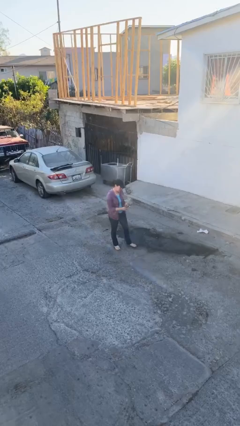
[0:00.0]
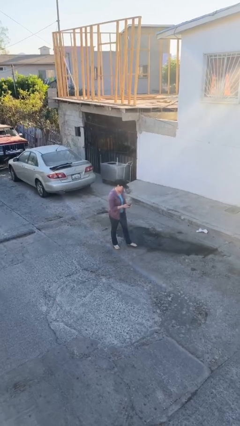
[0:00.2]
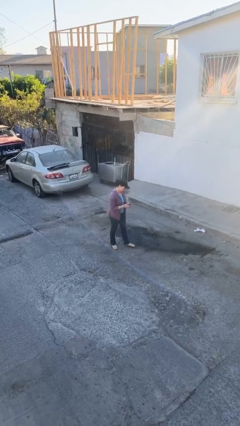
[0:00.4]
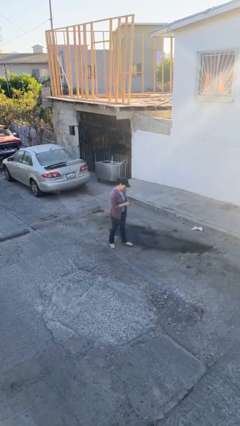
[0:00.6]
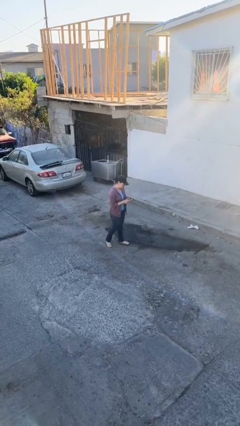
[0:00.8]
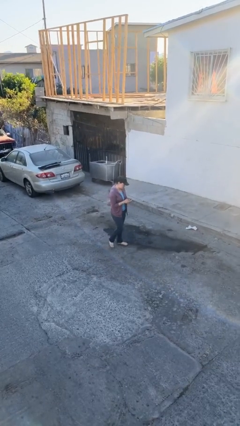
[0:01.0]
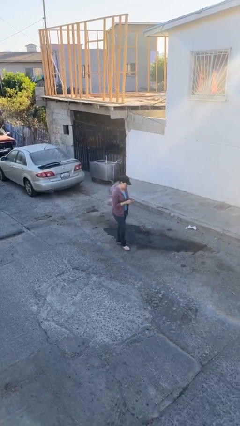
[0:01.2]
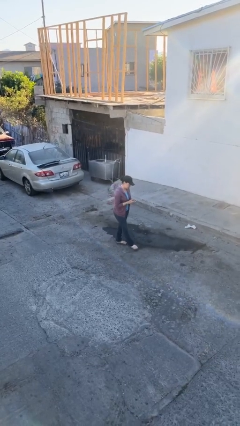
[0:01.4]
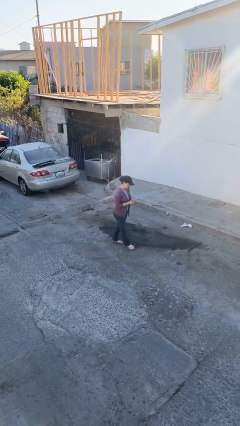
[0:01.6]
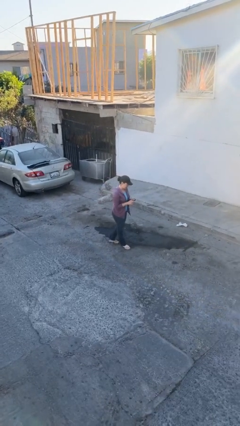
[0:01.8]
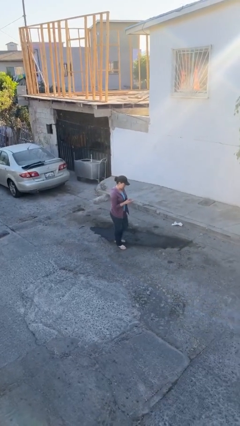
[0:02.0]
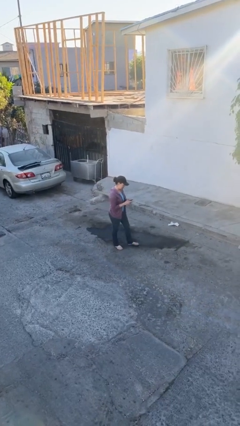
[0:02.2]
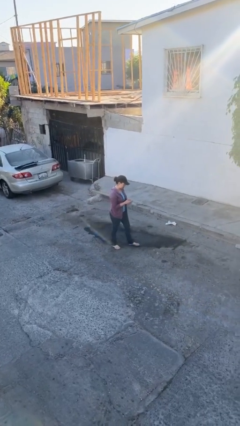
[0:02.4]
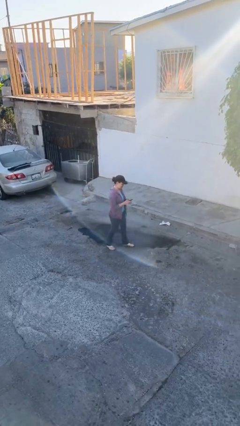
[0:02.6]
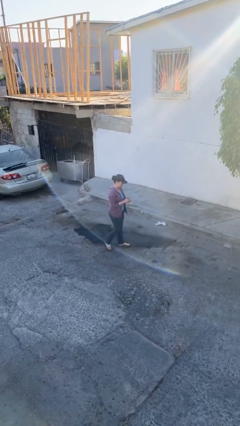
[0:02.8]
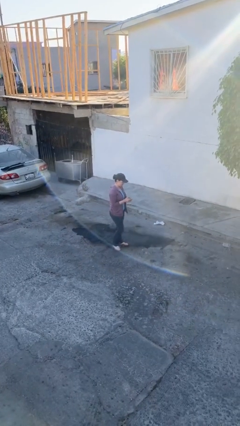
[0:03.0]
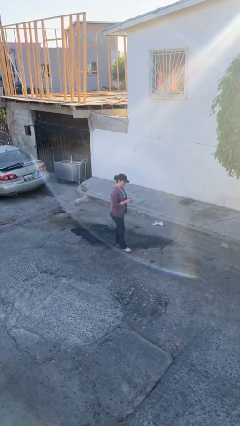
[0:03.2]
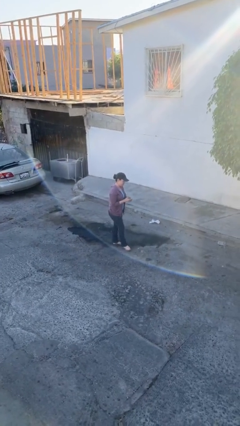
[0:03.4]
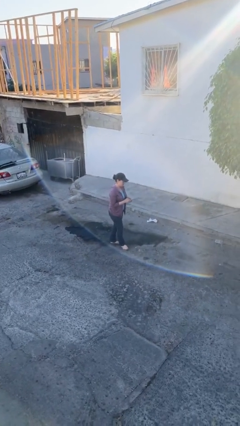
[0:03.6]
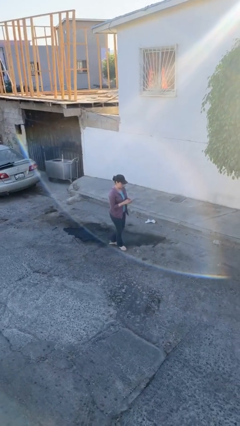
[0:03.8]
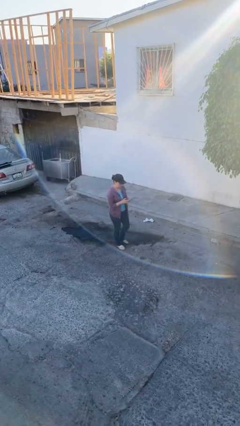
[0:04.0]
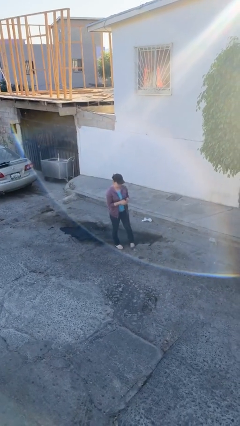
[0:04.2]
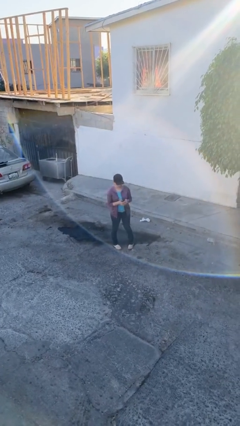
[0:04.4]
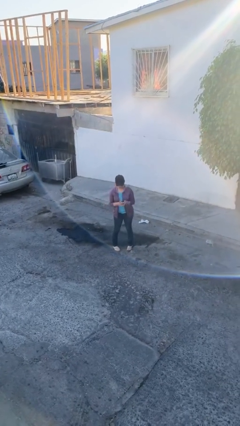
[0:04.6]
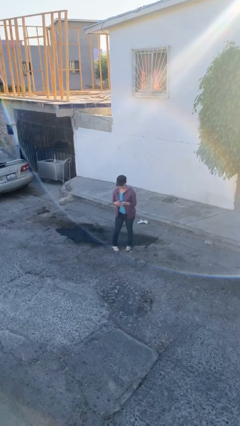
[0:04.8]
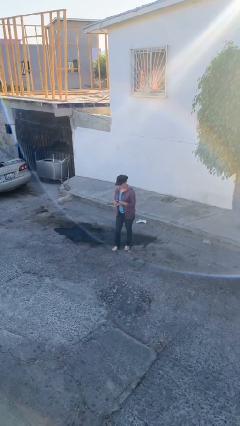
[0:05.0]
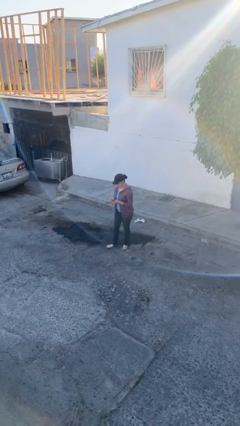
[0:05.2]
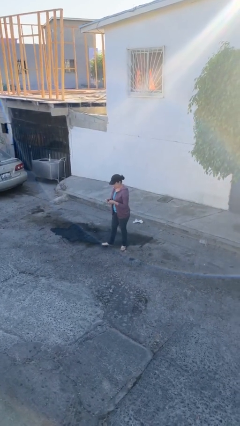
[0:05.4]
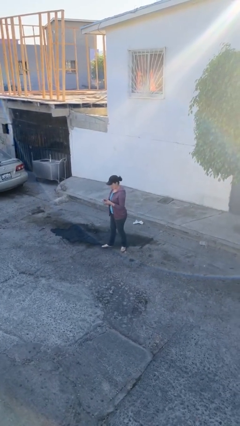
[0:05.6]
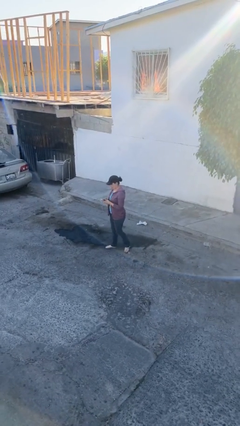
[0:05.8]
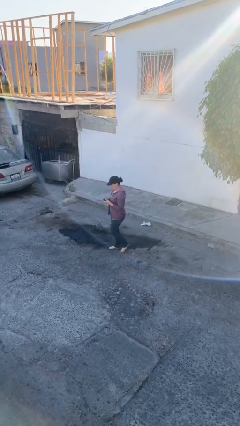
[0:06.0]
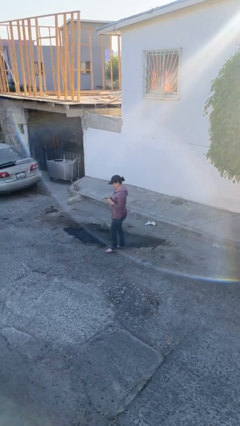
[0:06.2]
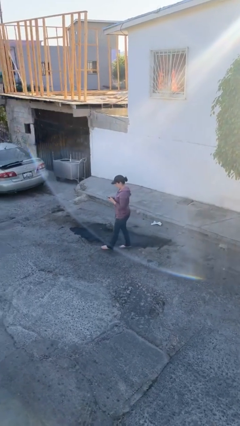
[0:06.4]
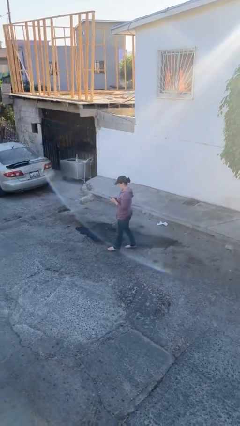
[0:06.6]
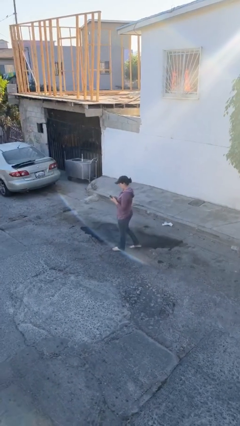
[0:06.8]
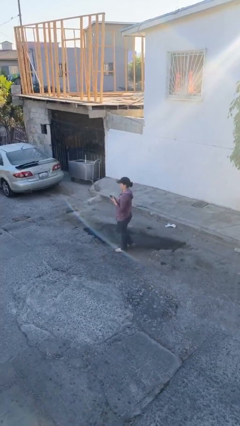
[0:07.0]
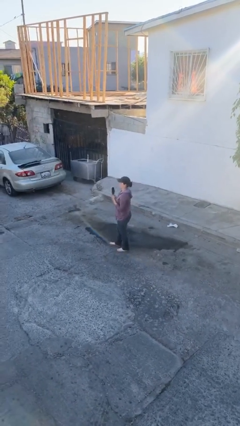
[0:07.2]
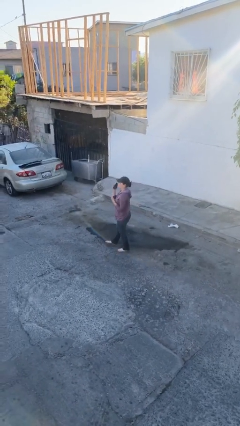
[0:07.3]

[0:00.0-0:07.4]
person texts on phone

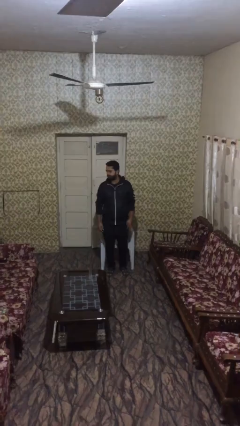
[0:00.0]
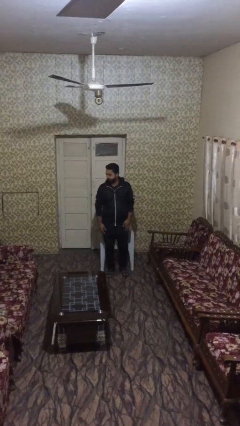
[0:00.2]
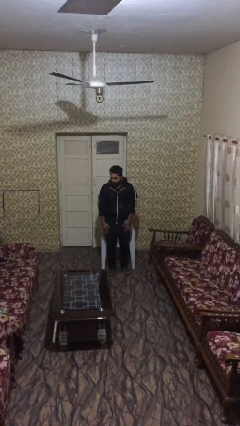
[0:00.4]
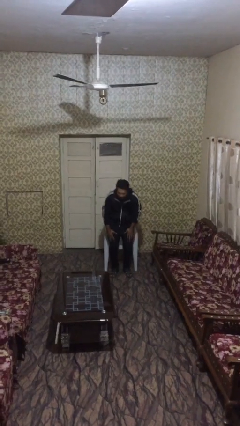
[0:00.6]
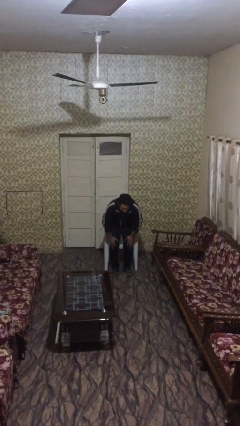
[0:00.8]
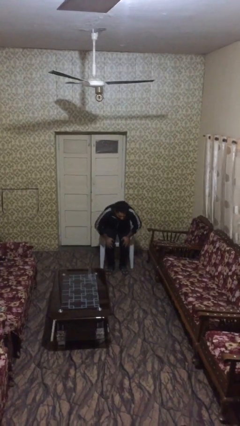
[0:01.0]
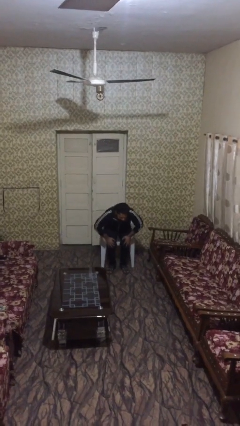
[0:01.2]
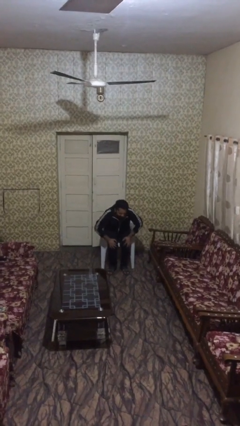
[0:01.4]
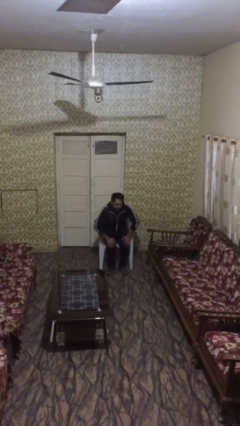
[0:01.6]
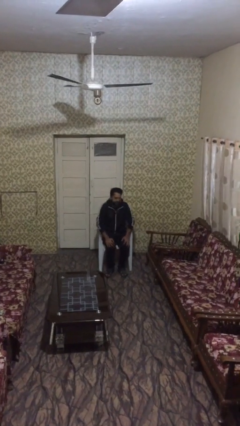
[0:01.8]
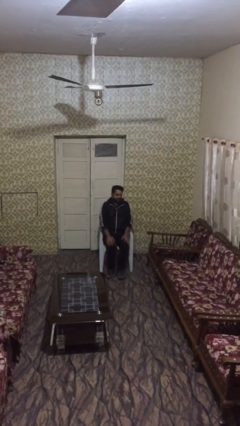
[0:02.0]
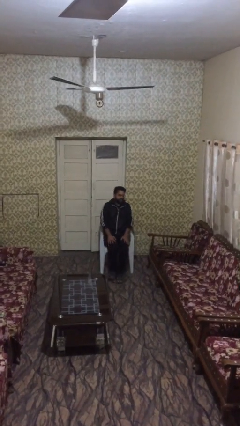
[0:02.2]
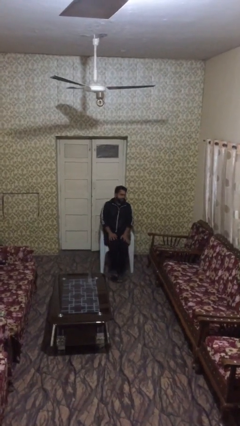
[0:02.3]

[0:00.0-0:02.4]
person sits down

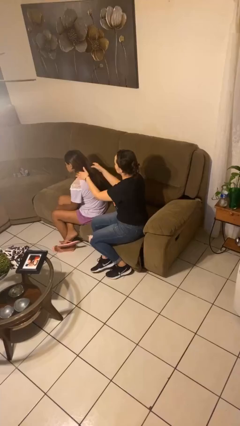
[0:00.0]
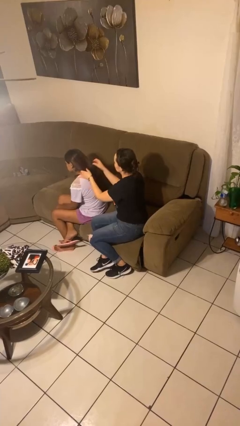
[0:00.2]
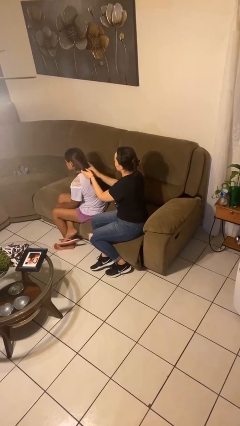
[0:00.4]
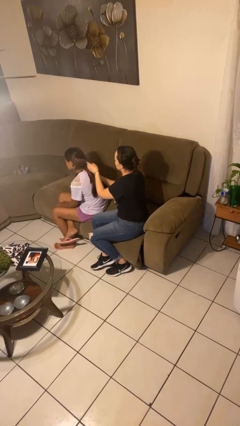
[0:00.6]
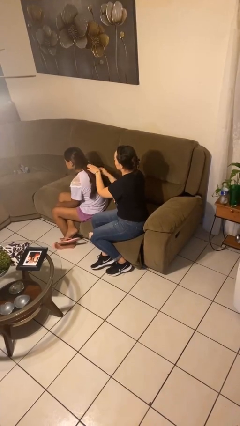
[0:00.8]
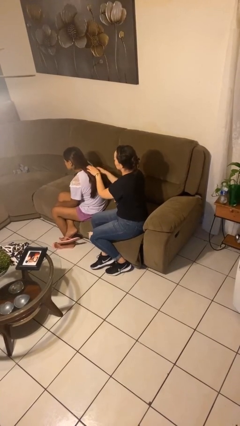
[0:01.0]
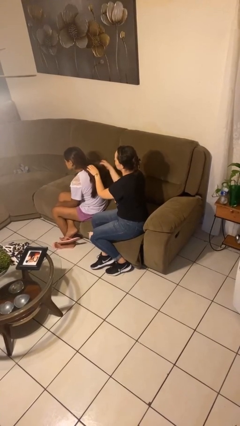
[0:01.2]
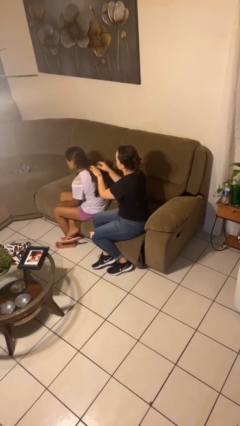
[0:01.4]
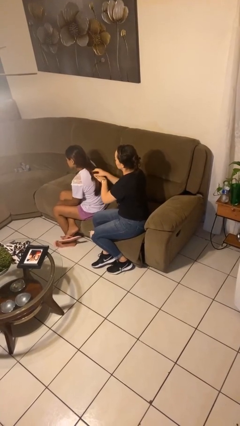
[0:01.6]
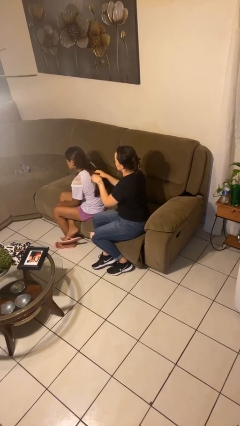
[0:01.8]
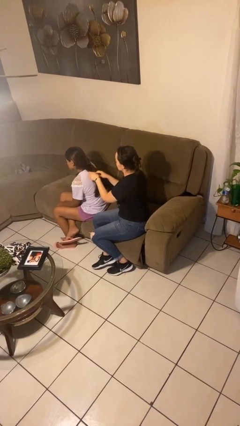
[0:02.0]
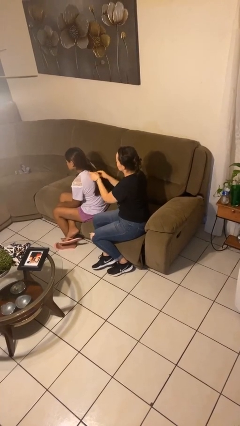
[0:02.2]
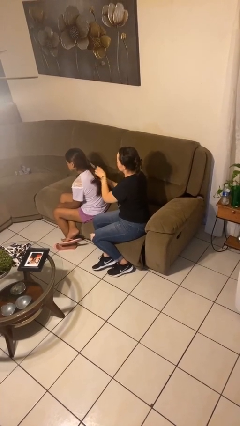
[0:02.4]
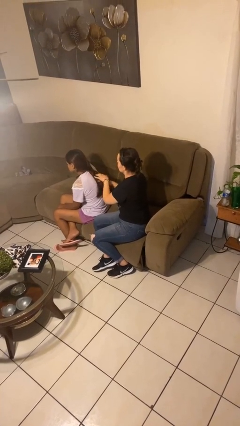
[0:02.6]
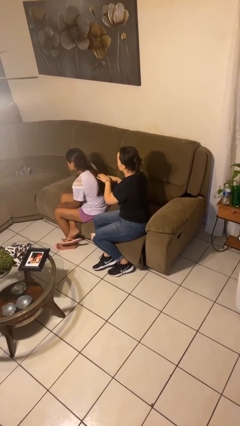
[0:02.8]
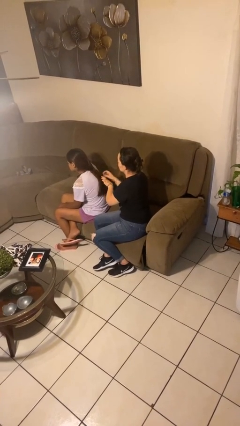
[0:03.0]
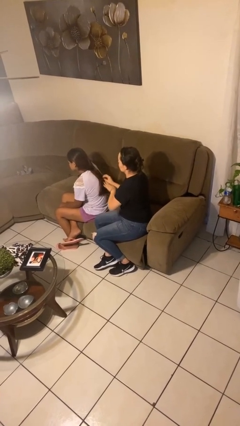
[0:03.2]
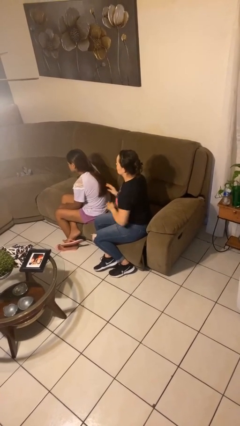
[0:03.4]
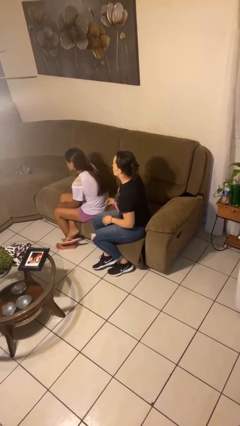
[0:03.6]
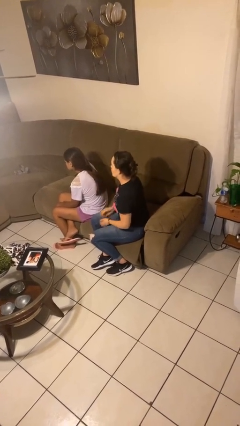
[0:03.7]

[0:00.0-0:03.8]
person braids hair of person

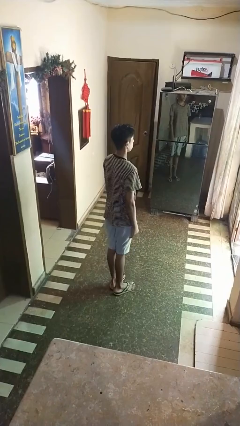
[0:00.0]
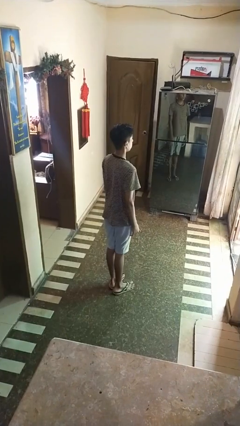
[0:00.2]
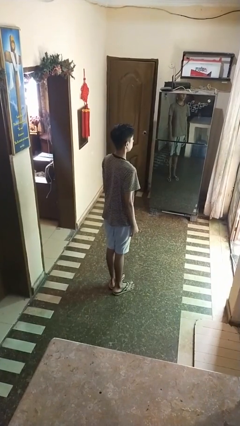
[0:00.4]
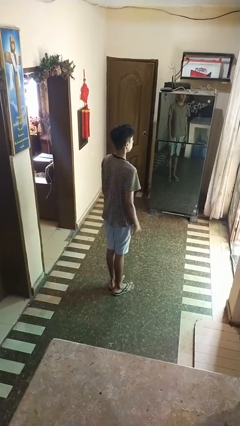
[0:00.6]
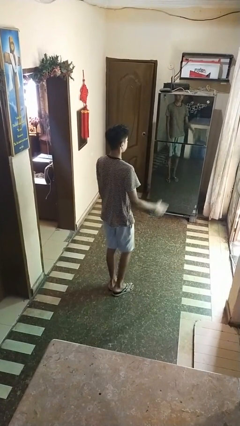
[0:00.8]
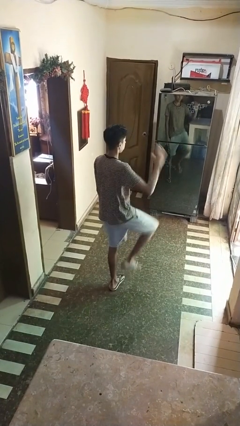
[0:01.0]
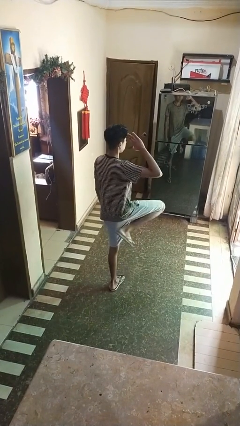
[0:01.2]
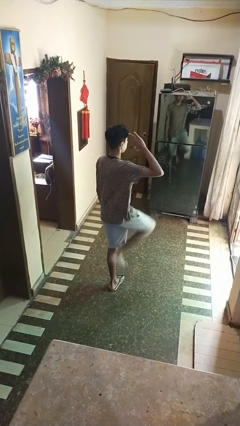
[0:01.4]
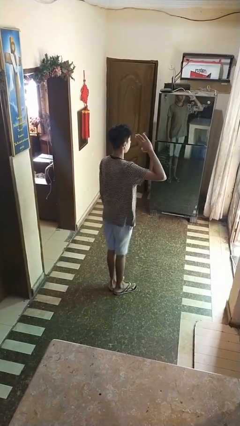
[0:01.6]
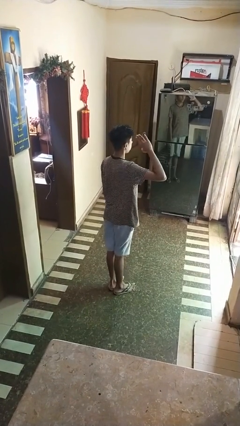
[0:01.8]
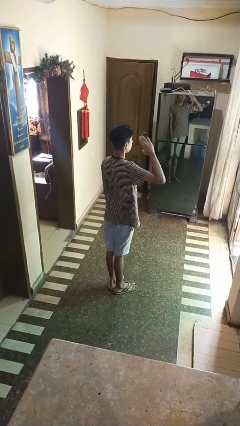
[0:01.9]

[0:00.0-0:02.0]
person salutes

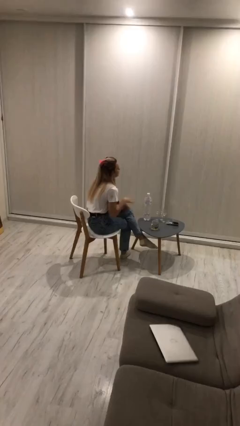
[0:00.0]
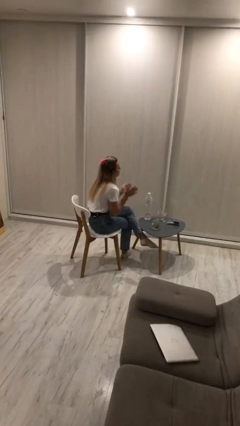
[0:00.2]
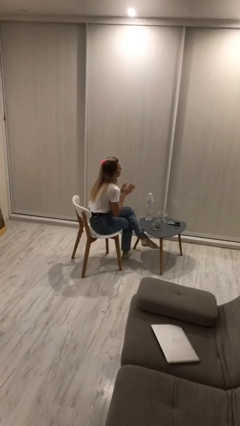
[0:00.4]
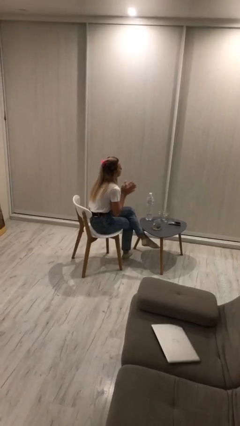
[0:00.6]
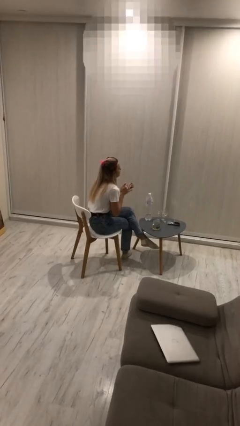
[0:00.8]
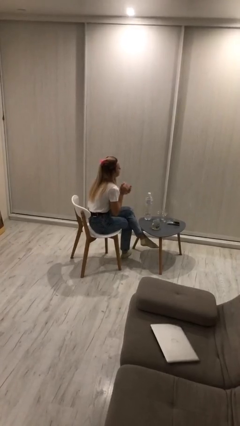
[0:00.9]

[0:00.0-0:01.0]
person claps hands

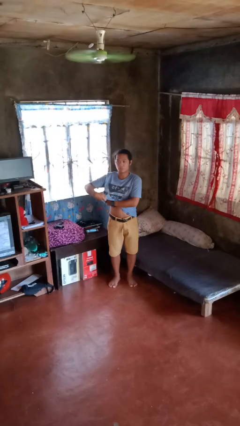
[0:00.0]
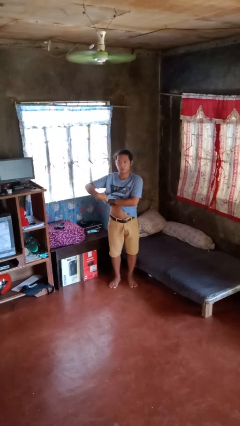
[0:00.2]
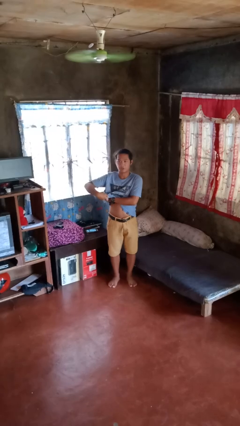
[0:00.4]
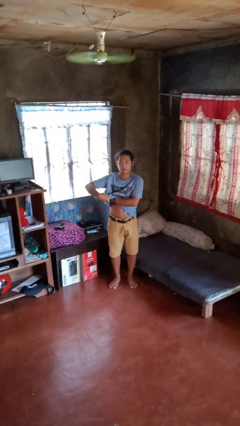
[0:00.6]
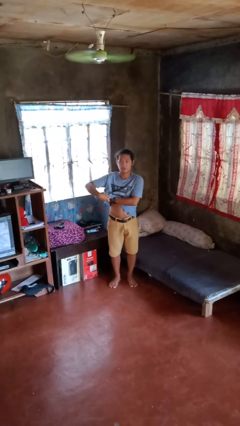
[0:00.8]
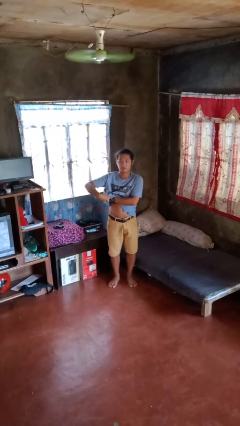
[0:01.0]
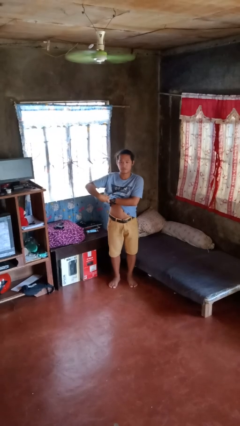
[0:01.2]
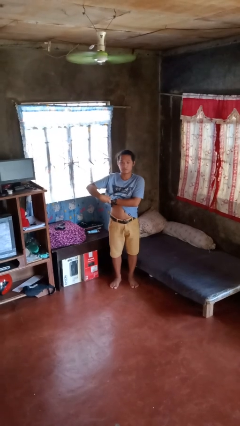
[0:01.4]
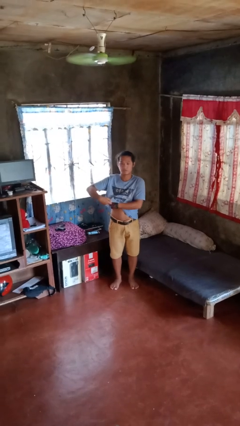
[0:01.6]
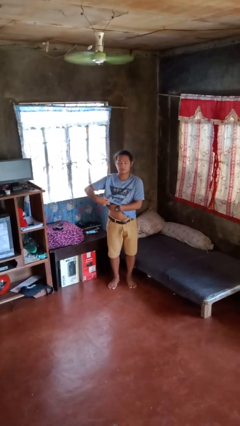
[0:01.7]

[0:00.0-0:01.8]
person applies deodorant
